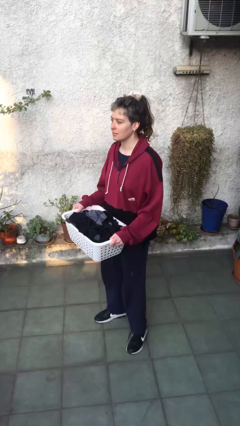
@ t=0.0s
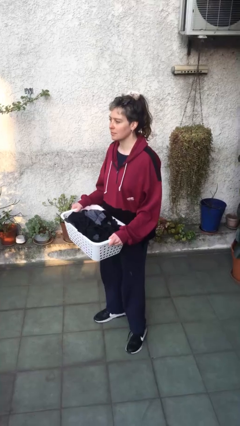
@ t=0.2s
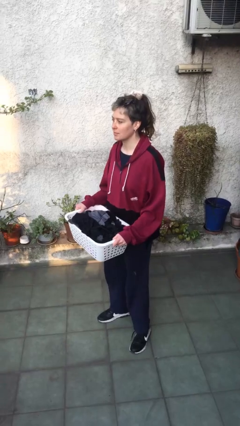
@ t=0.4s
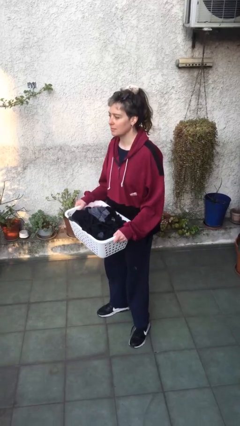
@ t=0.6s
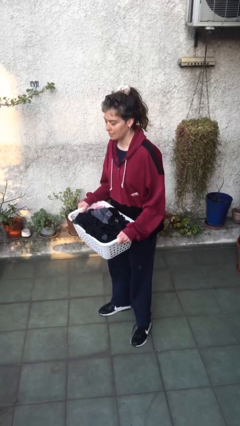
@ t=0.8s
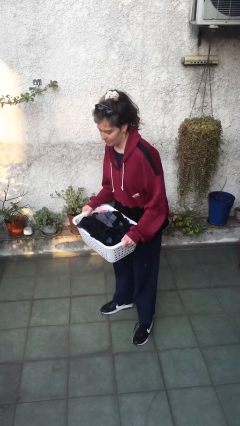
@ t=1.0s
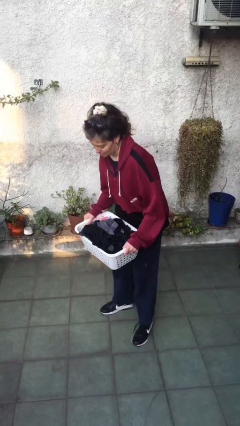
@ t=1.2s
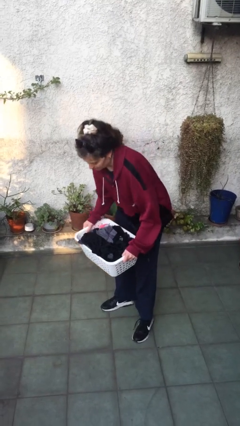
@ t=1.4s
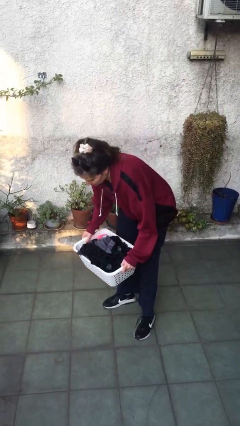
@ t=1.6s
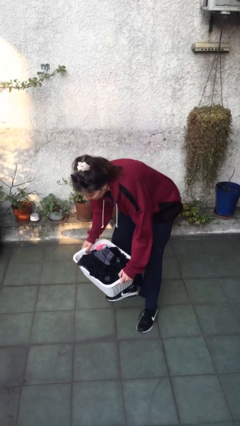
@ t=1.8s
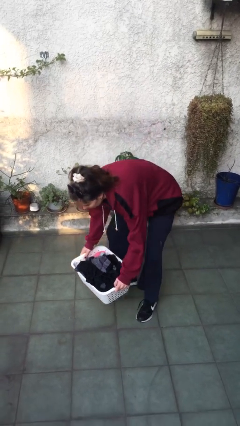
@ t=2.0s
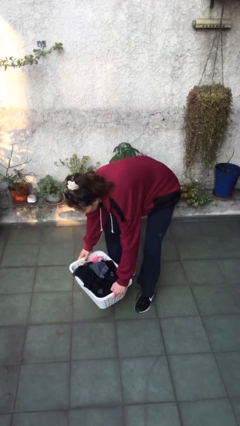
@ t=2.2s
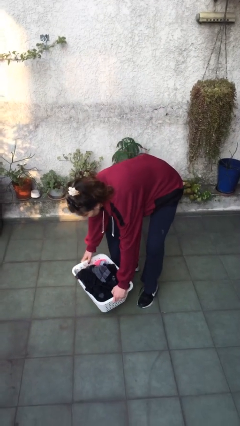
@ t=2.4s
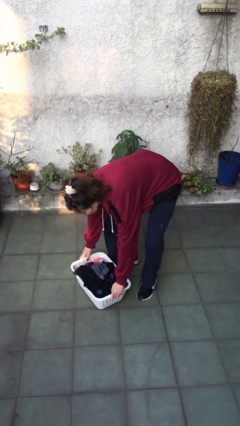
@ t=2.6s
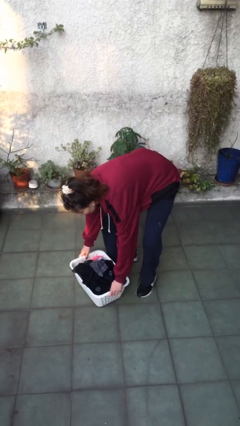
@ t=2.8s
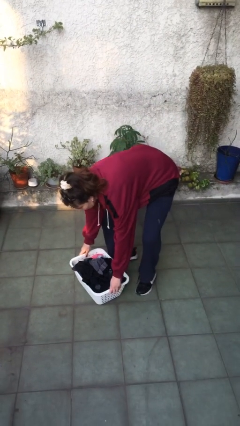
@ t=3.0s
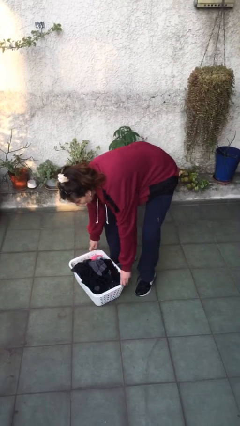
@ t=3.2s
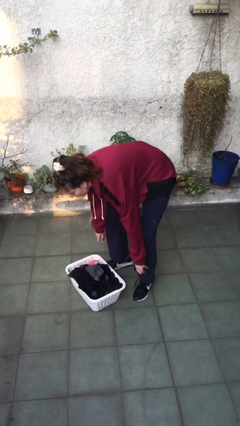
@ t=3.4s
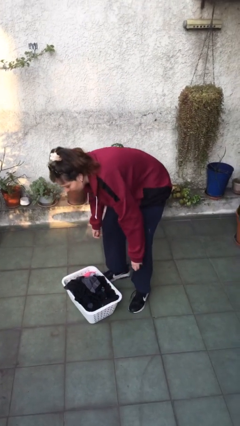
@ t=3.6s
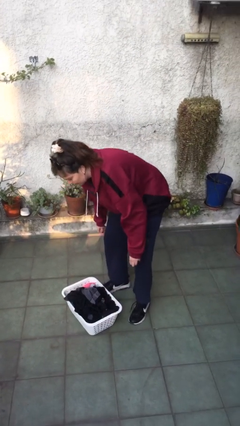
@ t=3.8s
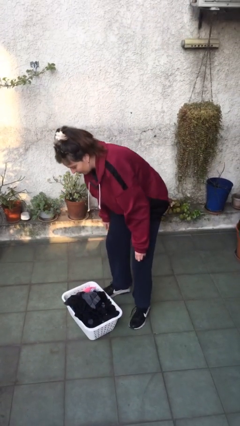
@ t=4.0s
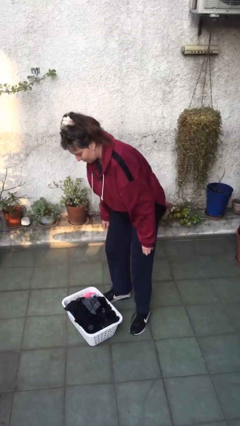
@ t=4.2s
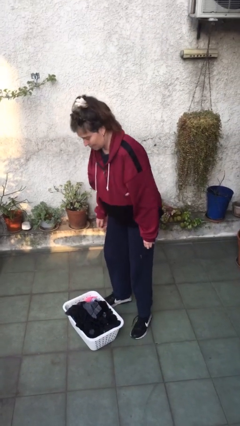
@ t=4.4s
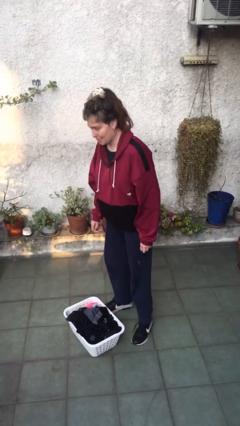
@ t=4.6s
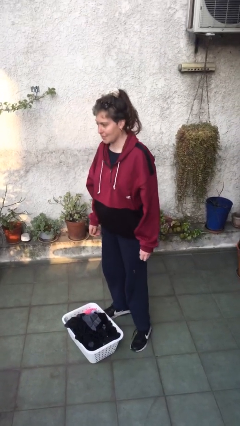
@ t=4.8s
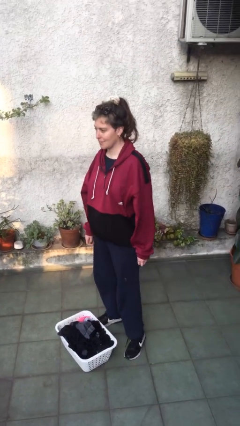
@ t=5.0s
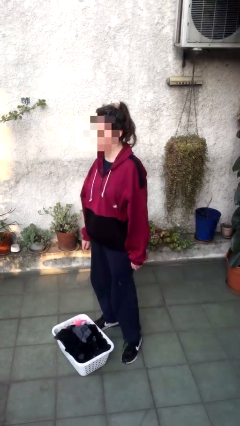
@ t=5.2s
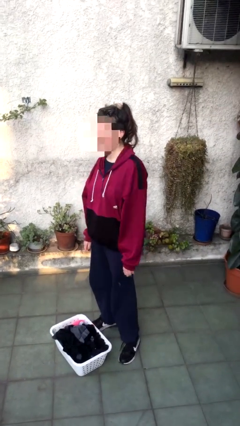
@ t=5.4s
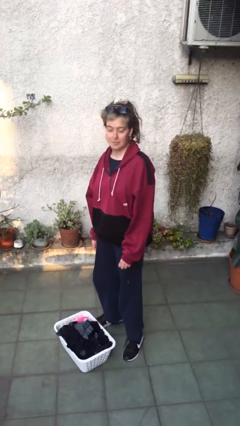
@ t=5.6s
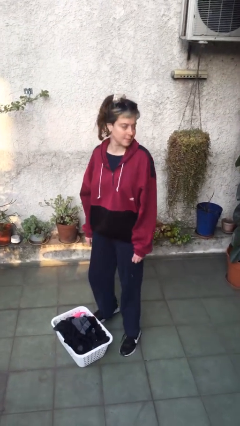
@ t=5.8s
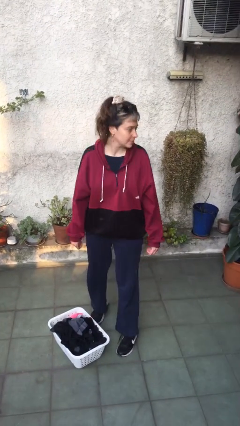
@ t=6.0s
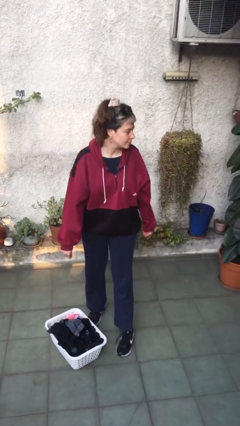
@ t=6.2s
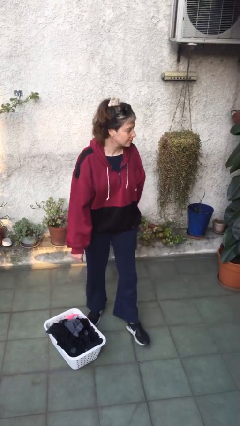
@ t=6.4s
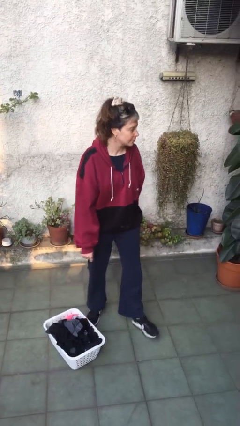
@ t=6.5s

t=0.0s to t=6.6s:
person puts down object on floor

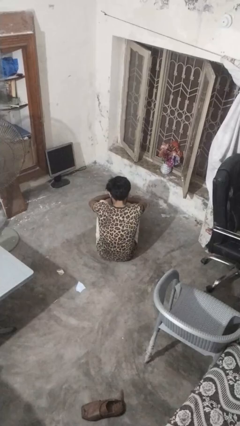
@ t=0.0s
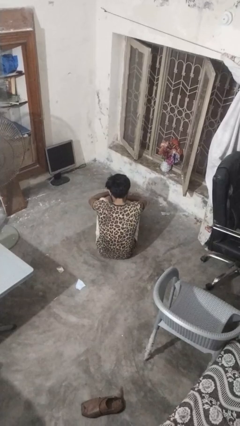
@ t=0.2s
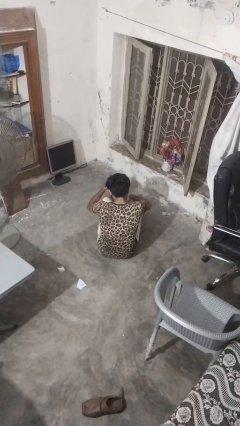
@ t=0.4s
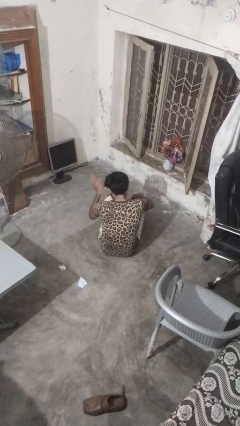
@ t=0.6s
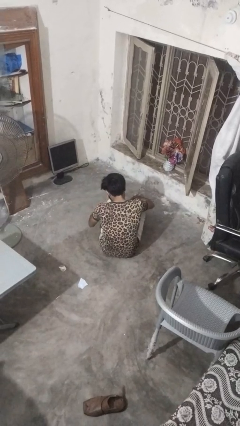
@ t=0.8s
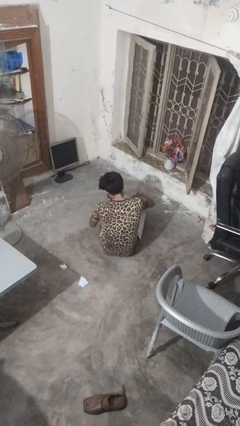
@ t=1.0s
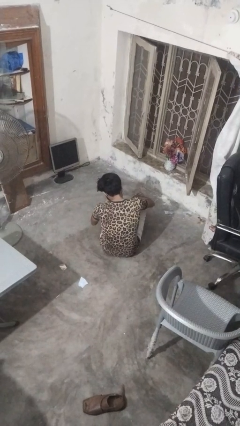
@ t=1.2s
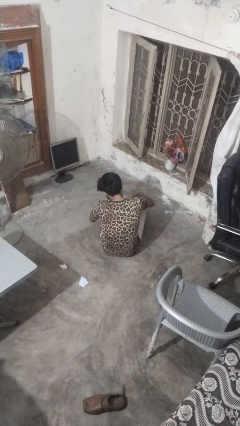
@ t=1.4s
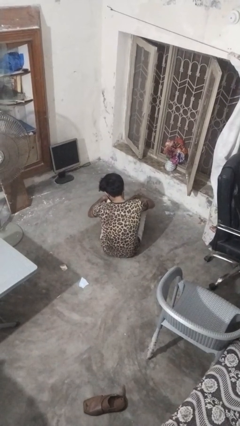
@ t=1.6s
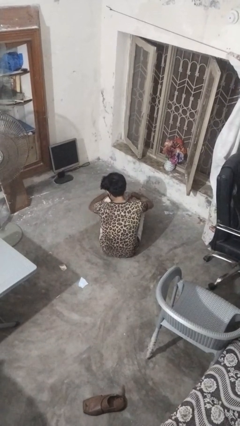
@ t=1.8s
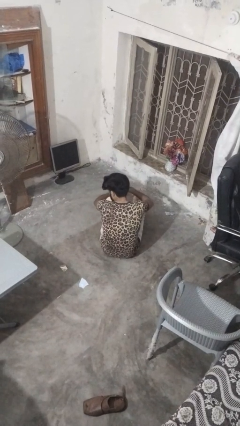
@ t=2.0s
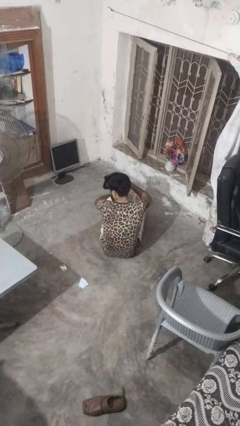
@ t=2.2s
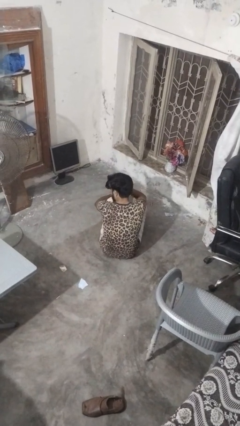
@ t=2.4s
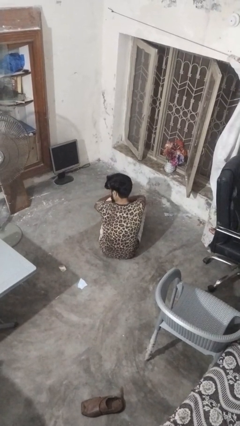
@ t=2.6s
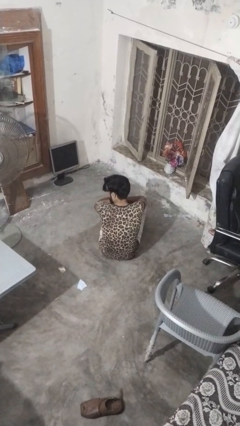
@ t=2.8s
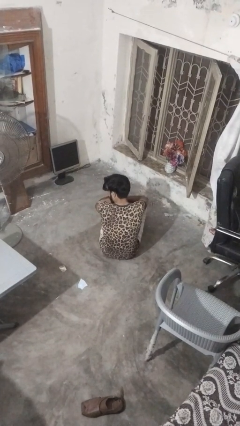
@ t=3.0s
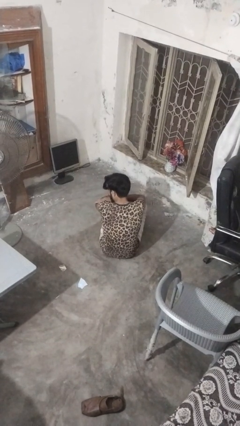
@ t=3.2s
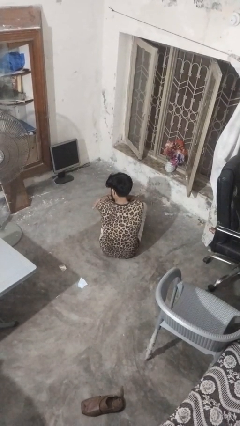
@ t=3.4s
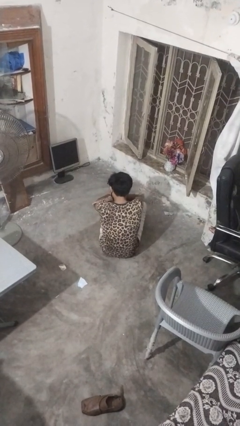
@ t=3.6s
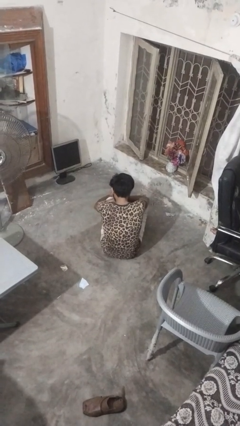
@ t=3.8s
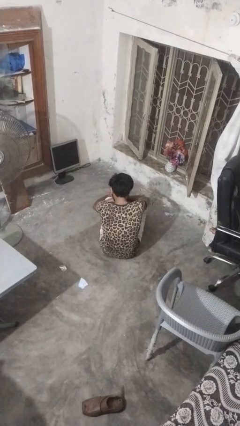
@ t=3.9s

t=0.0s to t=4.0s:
person swats bug

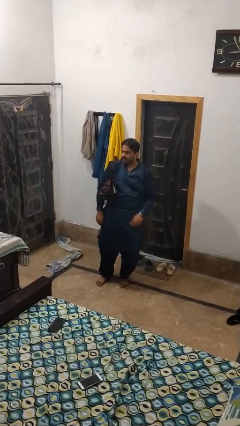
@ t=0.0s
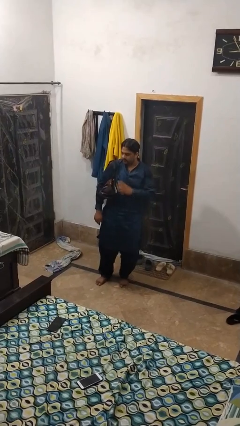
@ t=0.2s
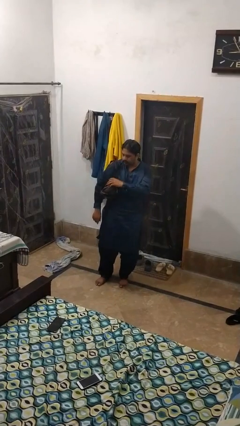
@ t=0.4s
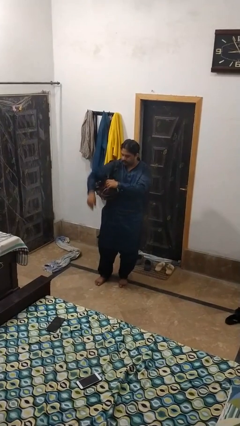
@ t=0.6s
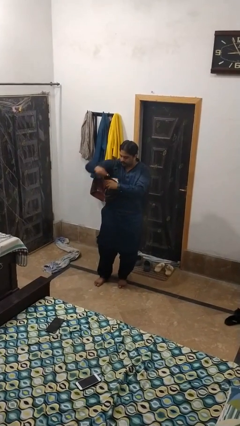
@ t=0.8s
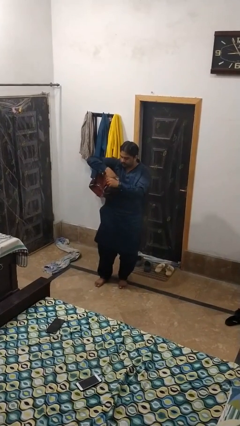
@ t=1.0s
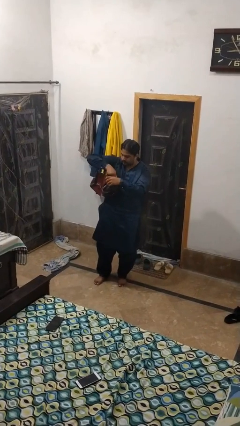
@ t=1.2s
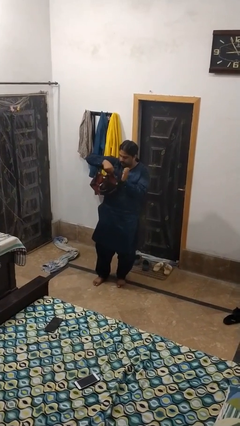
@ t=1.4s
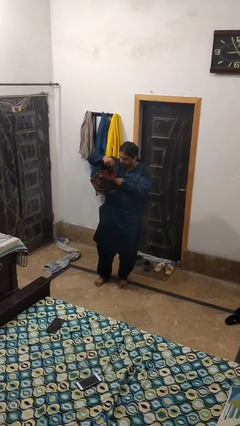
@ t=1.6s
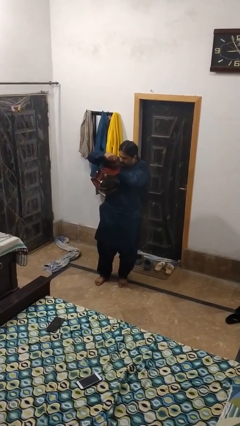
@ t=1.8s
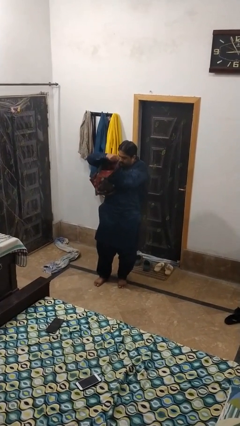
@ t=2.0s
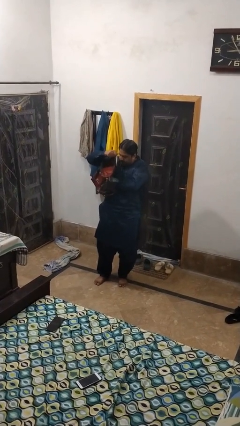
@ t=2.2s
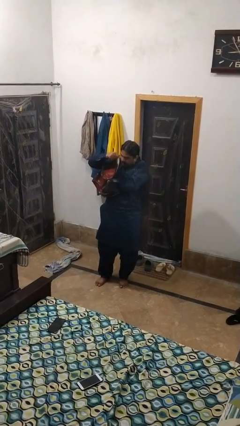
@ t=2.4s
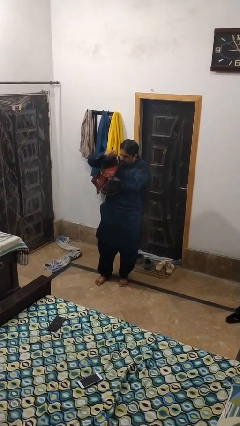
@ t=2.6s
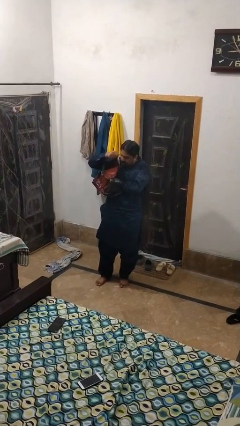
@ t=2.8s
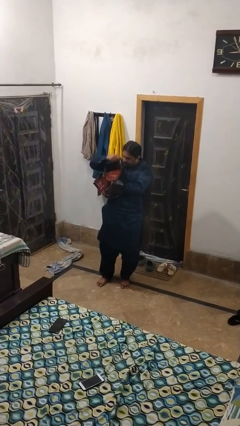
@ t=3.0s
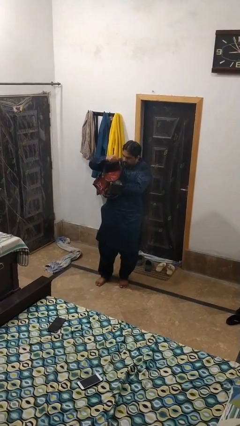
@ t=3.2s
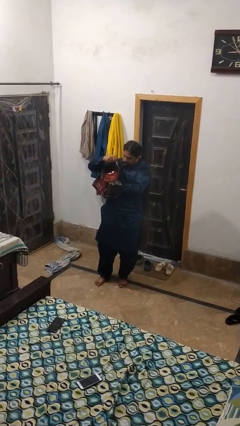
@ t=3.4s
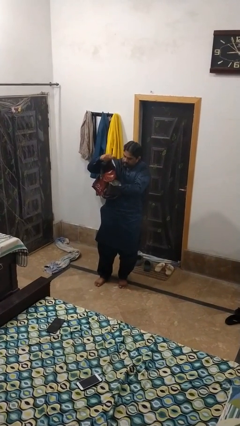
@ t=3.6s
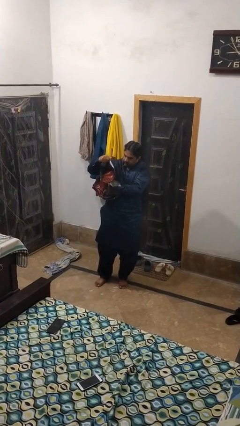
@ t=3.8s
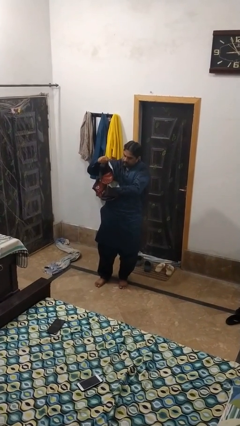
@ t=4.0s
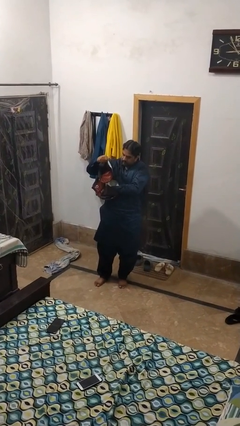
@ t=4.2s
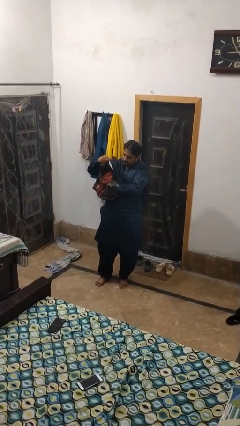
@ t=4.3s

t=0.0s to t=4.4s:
person searches in purse

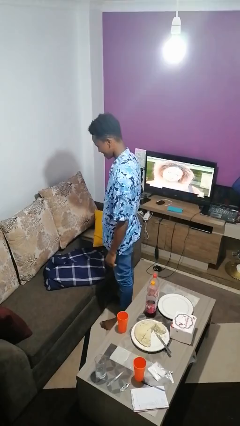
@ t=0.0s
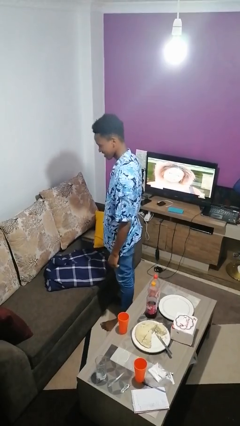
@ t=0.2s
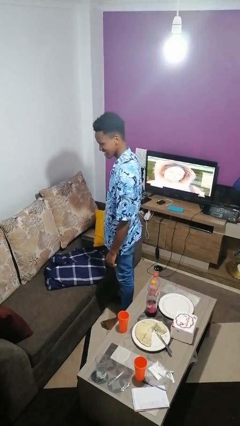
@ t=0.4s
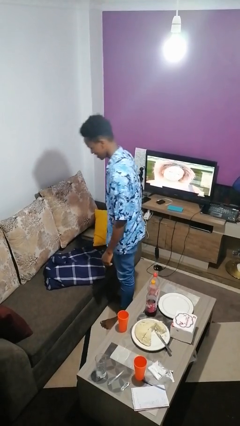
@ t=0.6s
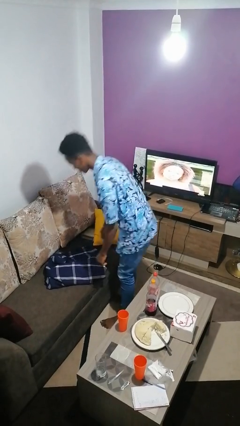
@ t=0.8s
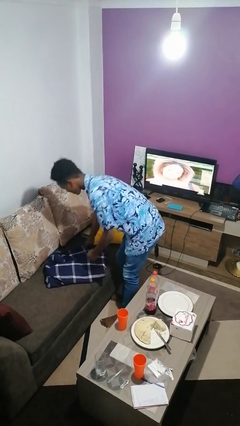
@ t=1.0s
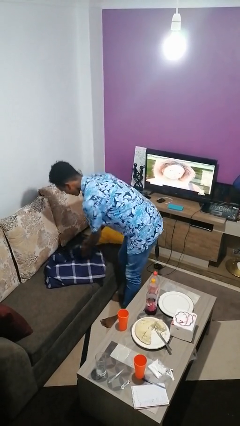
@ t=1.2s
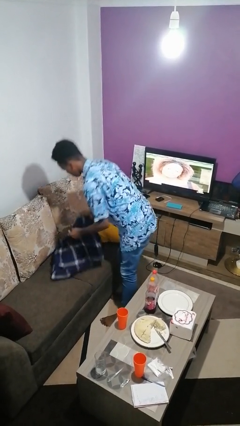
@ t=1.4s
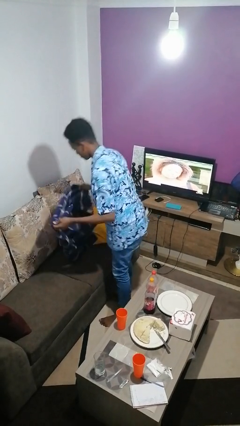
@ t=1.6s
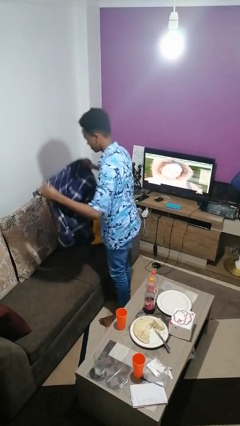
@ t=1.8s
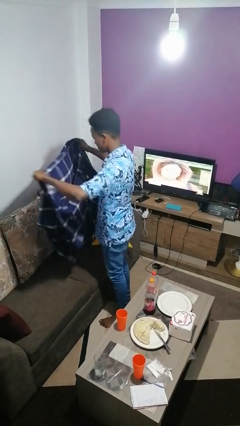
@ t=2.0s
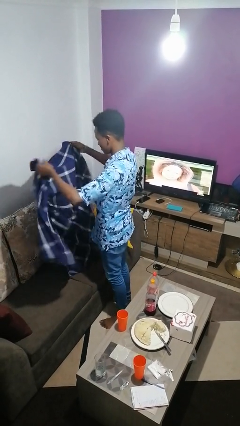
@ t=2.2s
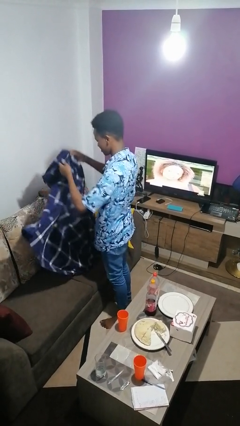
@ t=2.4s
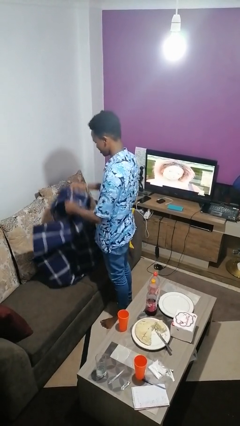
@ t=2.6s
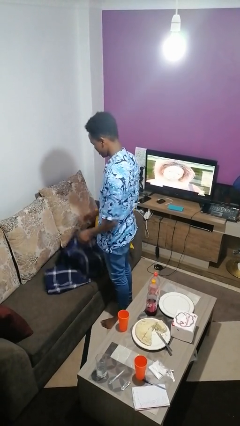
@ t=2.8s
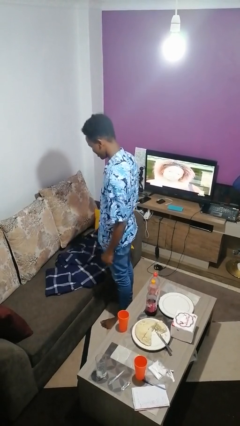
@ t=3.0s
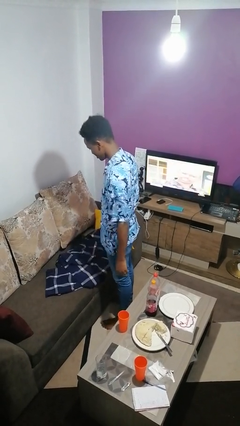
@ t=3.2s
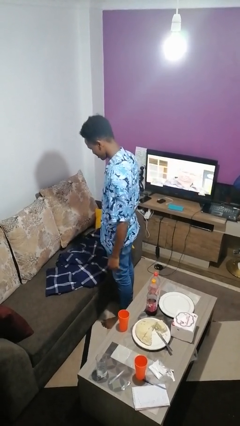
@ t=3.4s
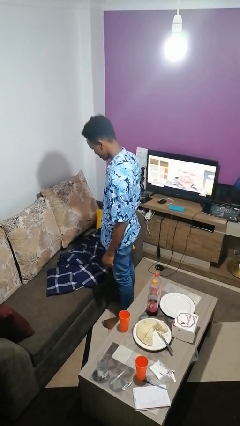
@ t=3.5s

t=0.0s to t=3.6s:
person unfolds blanket
